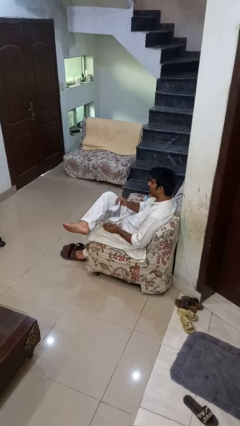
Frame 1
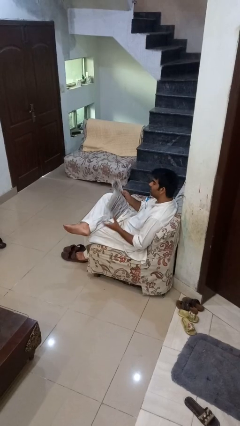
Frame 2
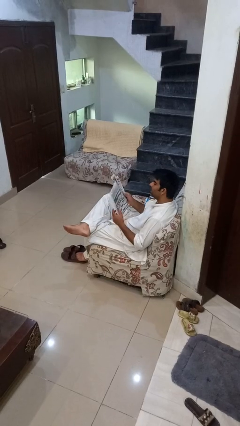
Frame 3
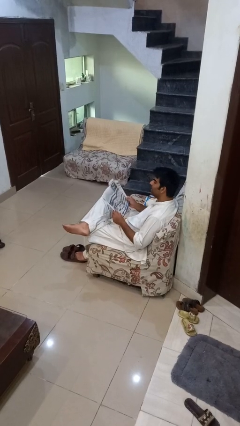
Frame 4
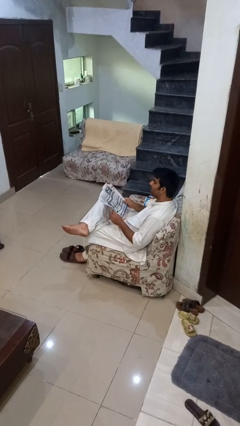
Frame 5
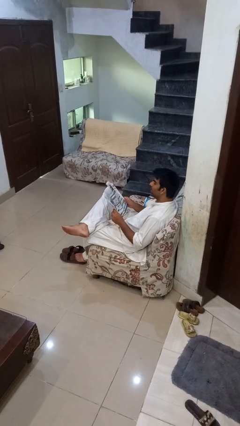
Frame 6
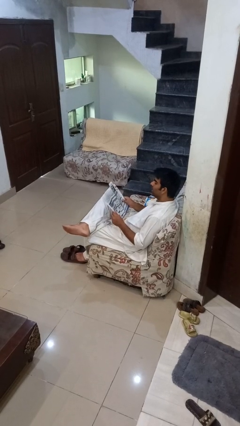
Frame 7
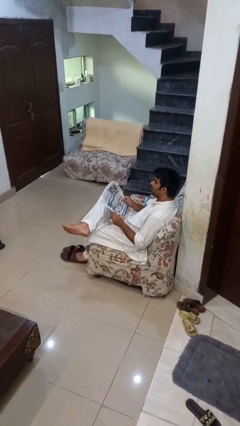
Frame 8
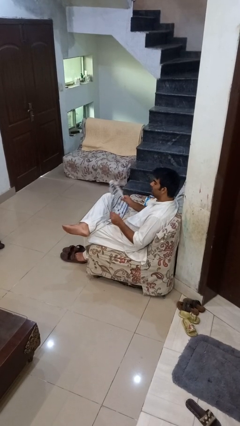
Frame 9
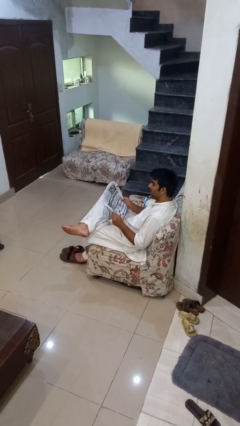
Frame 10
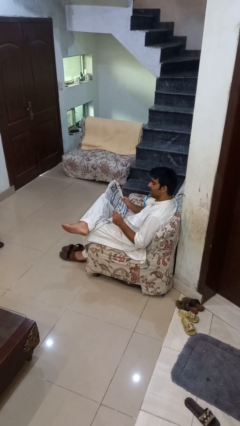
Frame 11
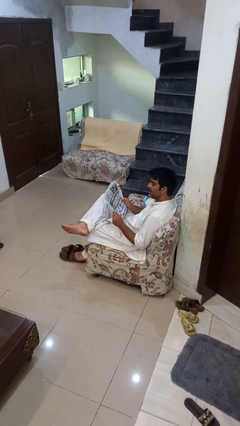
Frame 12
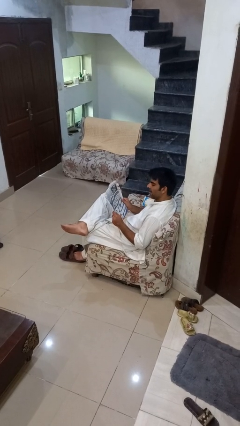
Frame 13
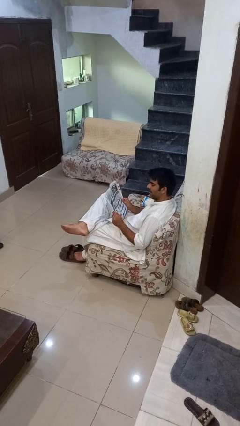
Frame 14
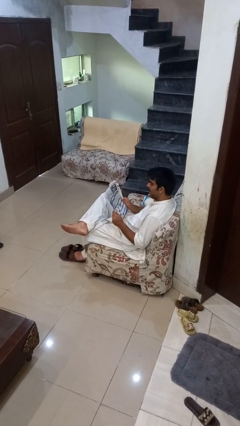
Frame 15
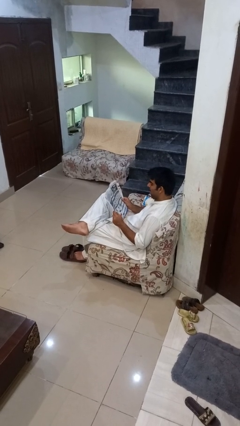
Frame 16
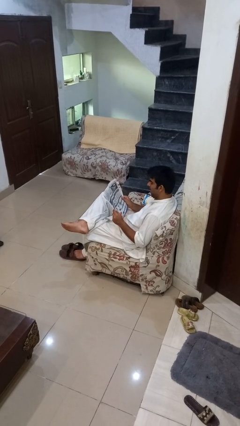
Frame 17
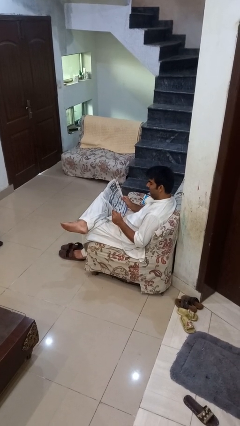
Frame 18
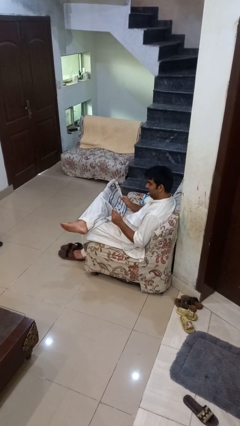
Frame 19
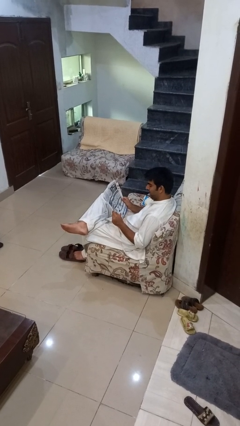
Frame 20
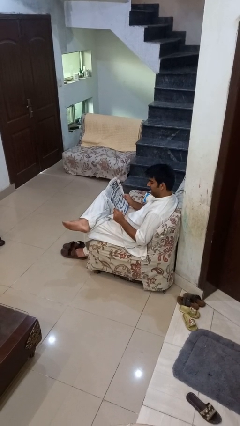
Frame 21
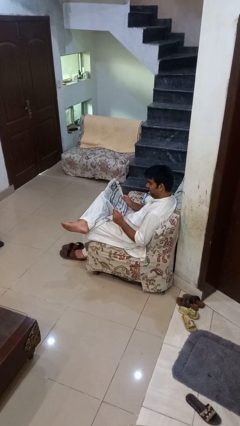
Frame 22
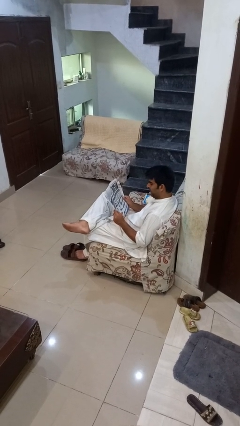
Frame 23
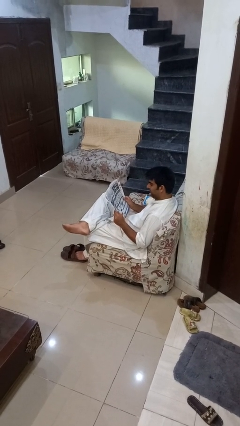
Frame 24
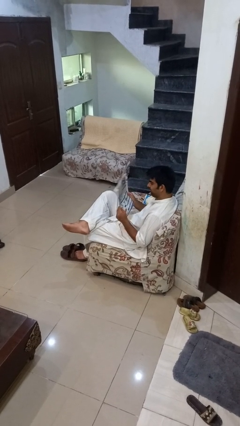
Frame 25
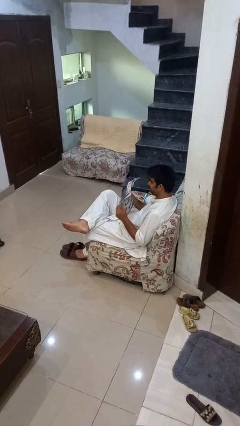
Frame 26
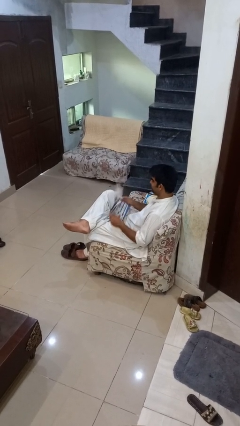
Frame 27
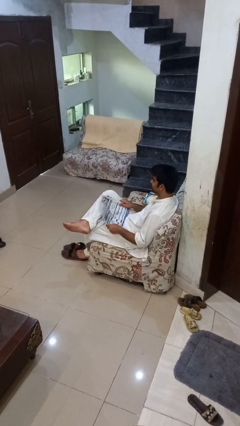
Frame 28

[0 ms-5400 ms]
person reads newspaper

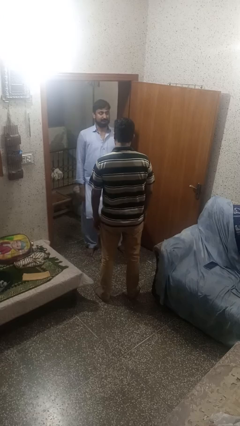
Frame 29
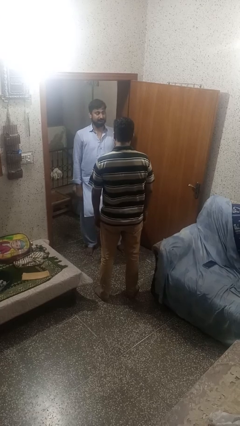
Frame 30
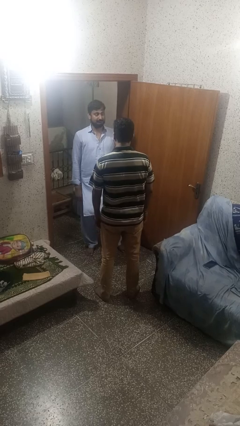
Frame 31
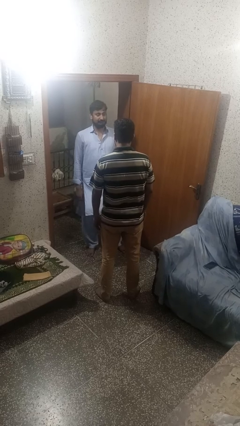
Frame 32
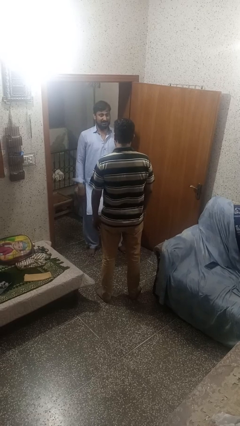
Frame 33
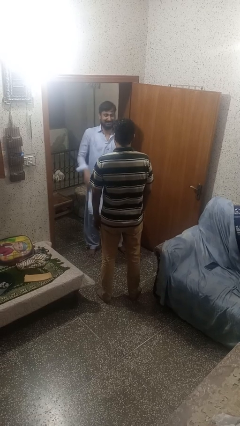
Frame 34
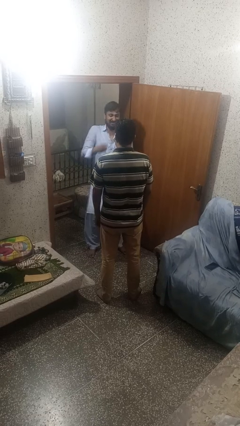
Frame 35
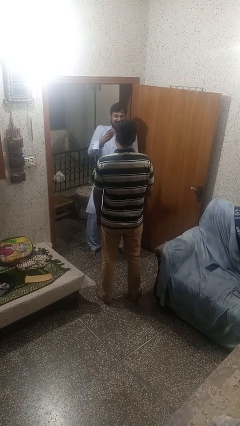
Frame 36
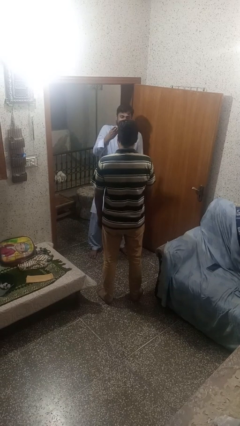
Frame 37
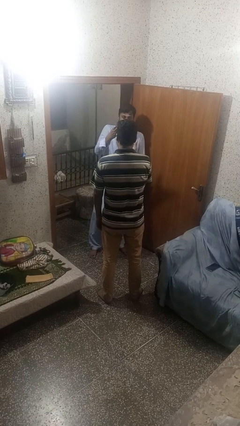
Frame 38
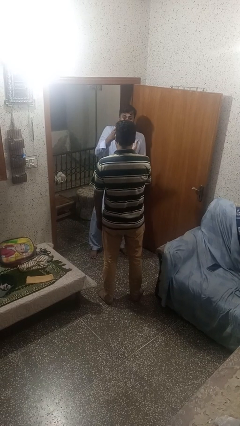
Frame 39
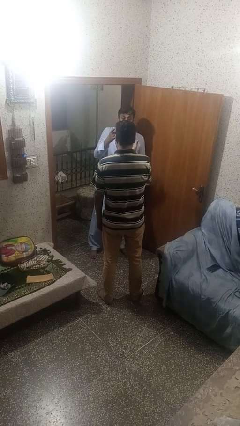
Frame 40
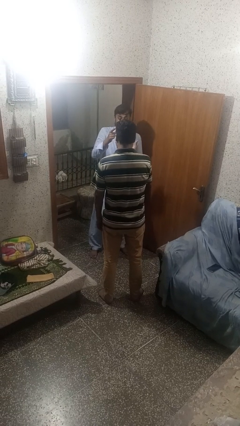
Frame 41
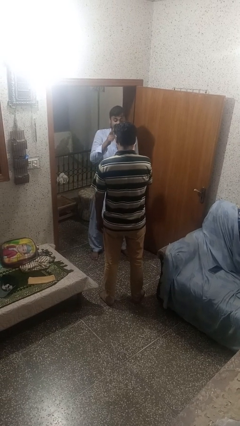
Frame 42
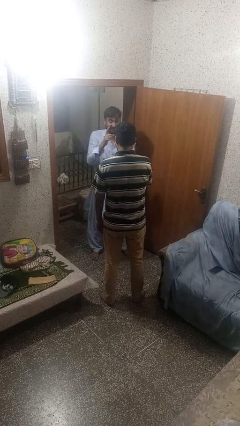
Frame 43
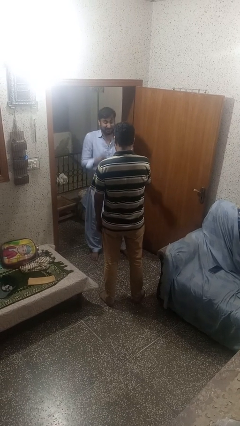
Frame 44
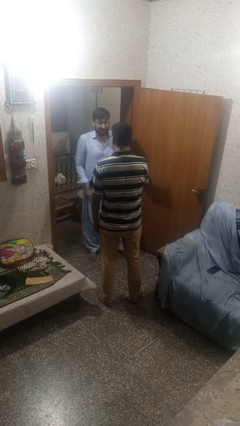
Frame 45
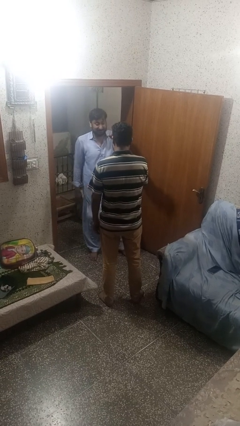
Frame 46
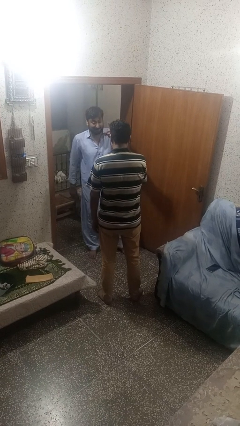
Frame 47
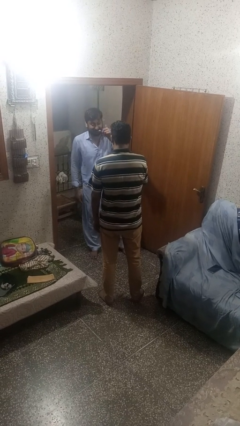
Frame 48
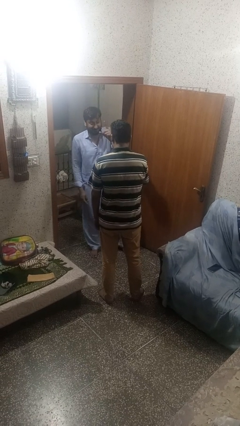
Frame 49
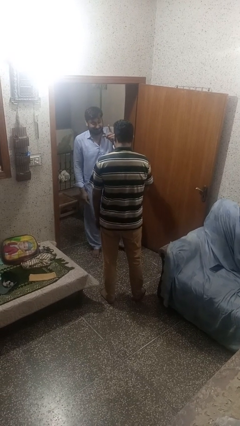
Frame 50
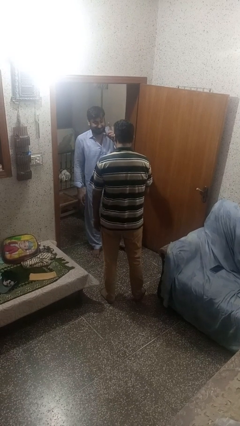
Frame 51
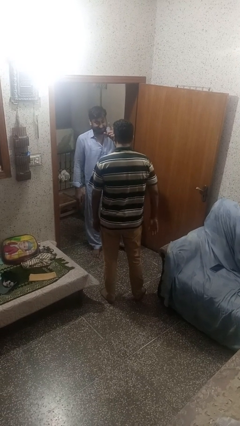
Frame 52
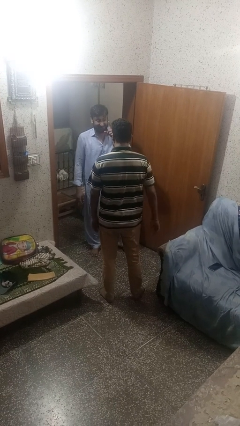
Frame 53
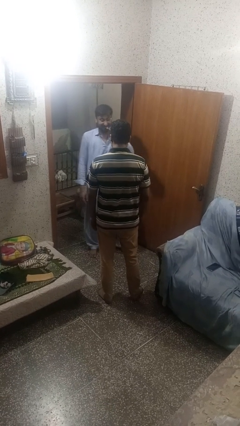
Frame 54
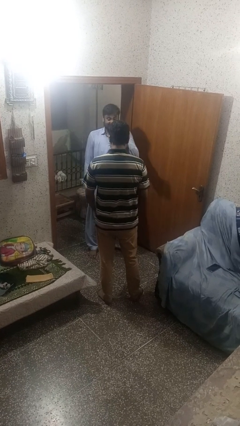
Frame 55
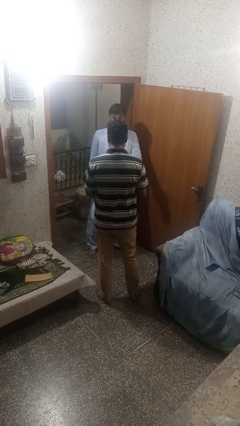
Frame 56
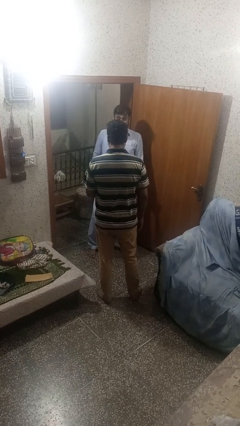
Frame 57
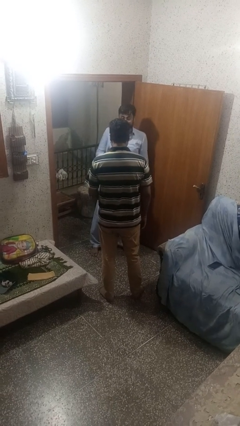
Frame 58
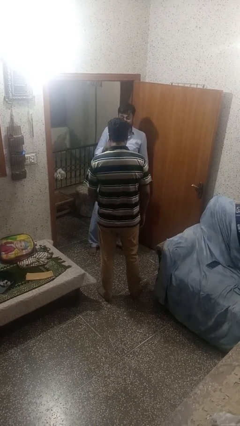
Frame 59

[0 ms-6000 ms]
person laughs with person

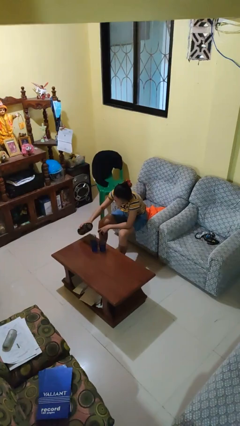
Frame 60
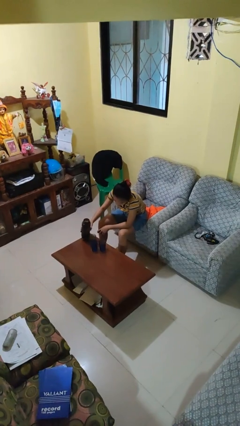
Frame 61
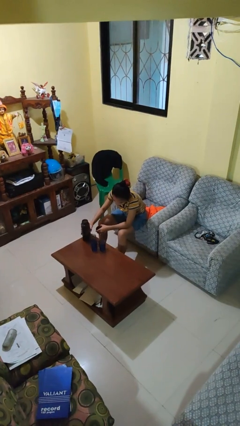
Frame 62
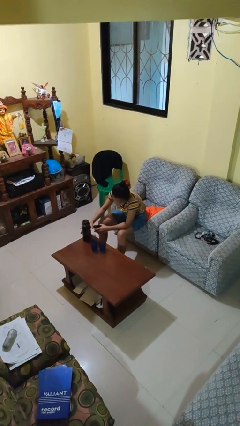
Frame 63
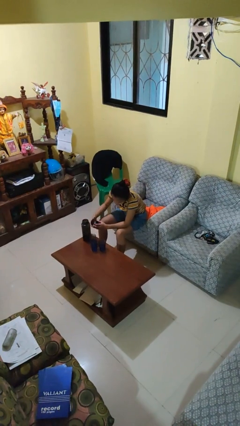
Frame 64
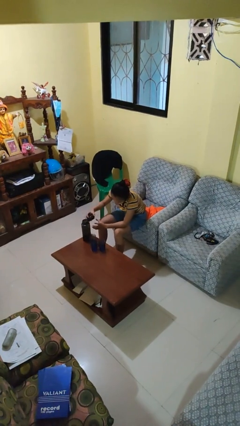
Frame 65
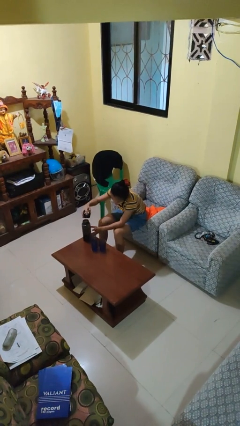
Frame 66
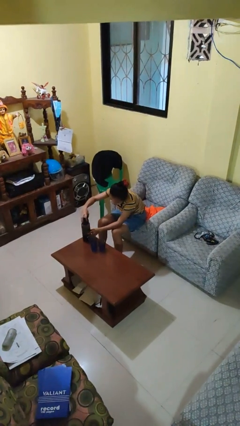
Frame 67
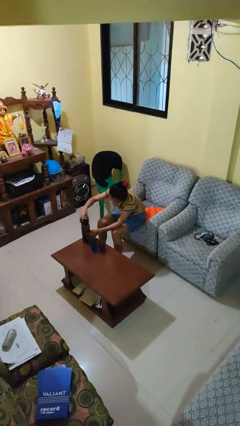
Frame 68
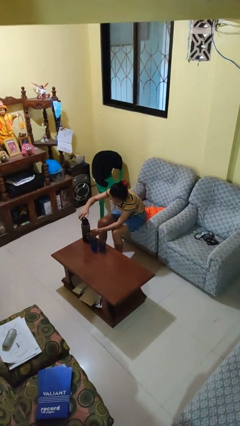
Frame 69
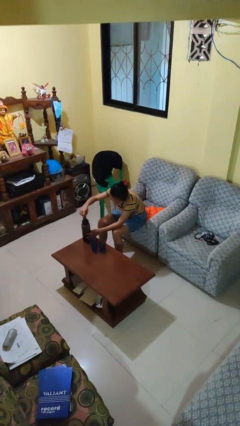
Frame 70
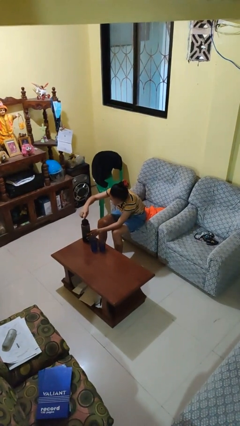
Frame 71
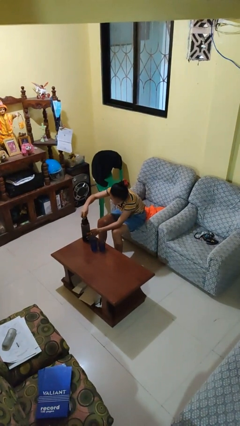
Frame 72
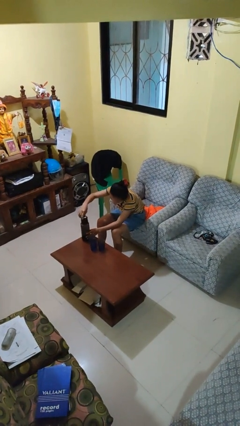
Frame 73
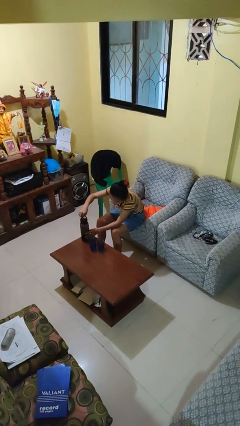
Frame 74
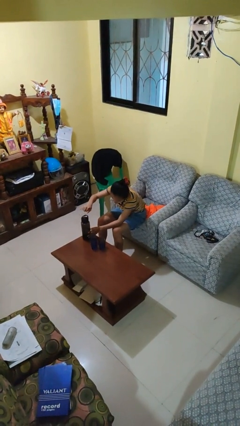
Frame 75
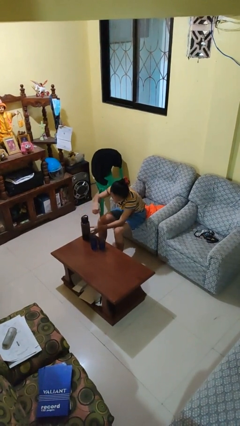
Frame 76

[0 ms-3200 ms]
person screws lid to bottle

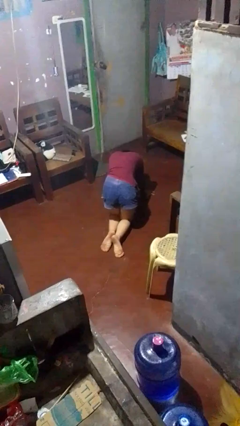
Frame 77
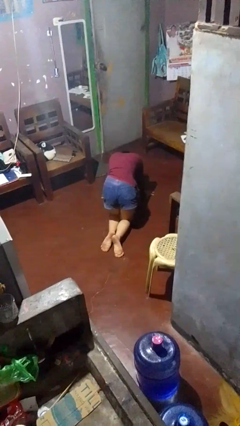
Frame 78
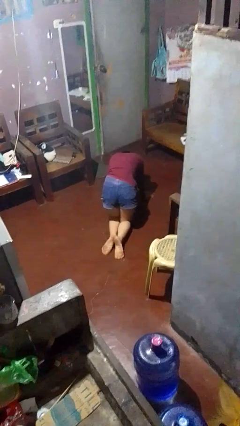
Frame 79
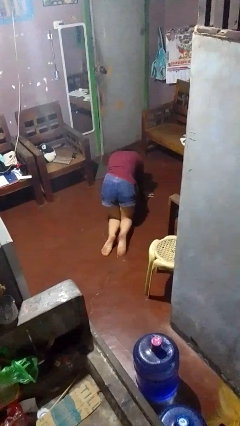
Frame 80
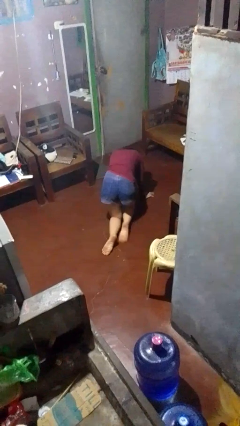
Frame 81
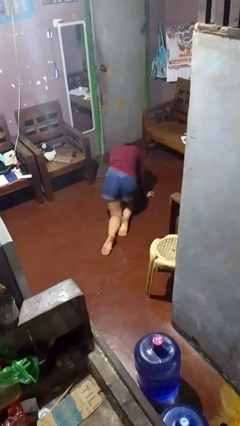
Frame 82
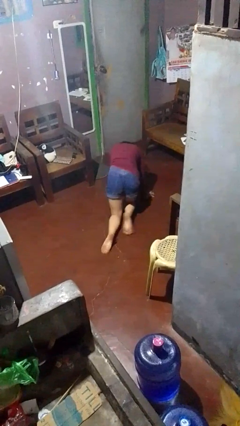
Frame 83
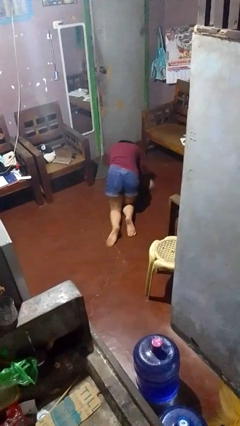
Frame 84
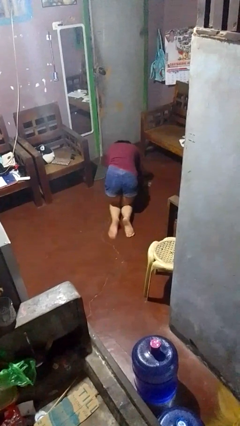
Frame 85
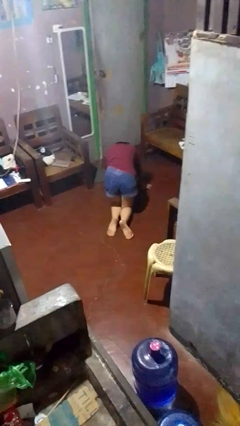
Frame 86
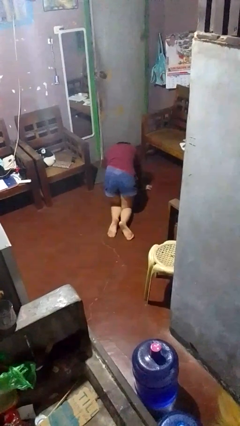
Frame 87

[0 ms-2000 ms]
person crawls

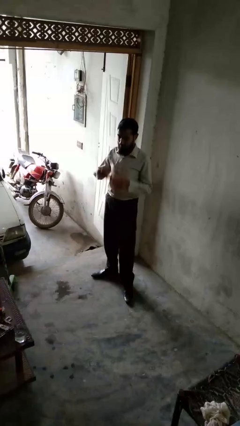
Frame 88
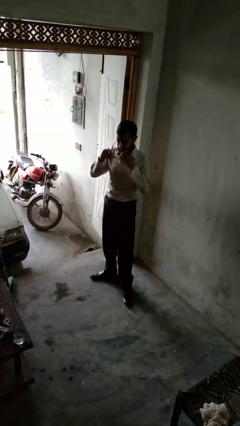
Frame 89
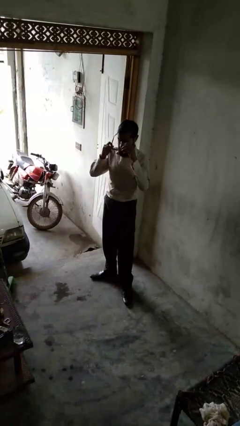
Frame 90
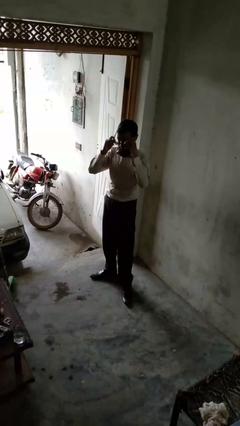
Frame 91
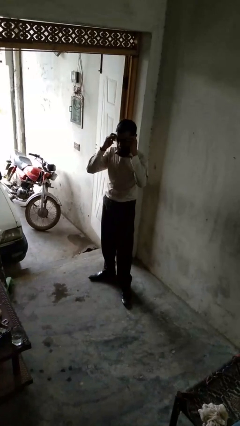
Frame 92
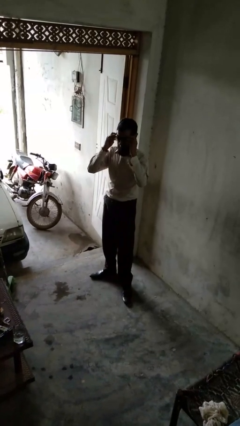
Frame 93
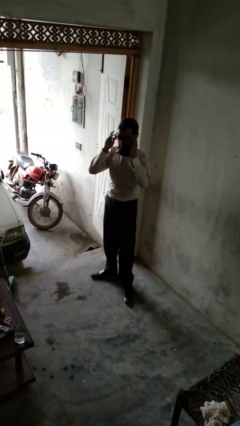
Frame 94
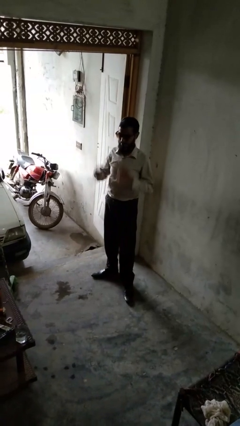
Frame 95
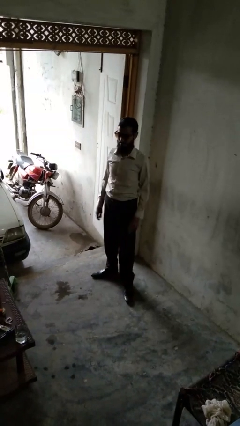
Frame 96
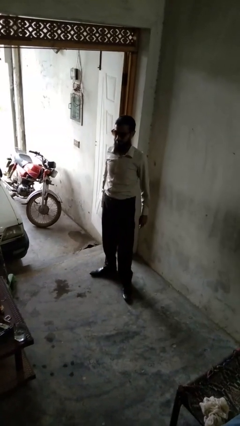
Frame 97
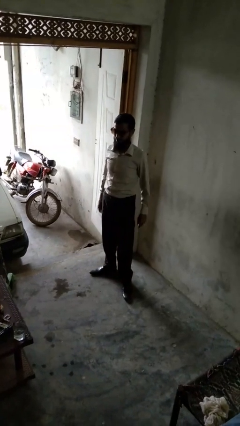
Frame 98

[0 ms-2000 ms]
person puts on sunglasses
